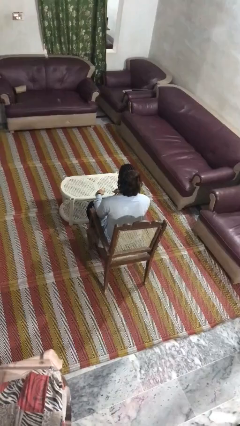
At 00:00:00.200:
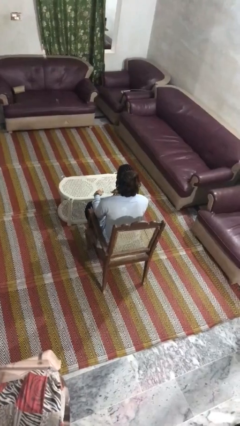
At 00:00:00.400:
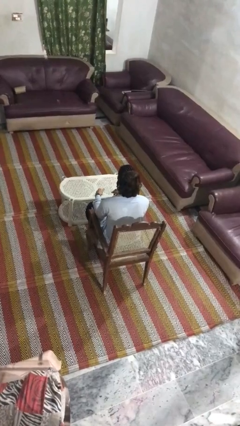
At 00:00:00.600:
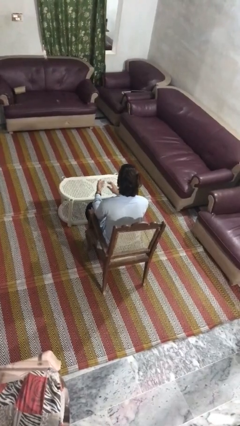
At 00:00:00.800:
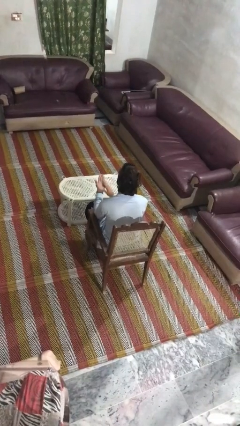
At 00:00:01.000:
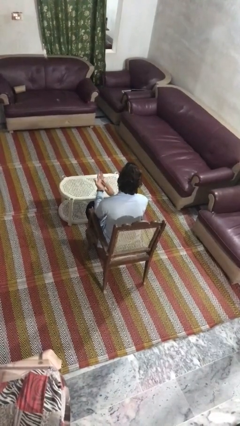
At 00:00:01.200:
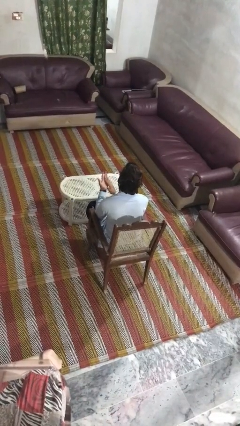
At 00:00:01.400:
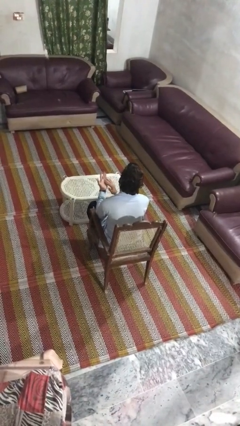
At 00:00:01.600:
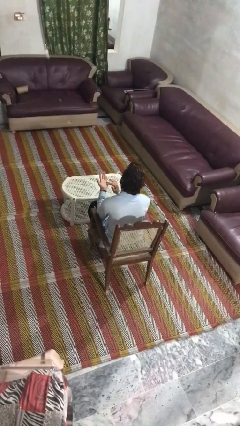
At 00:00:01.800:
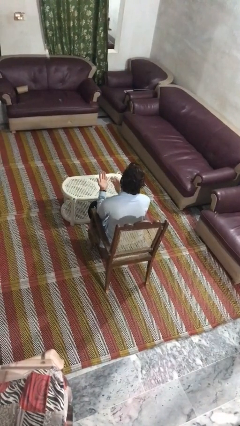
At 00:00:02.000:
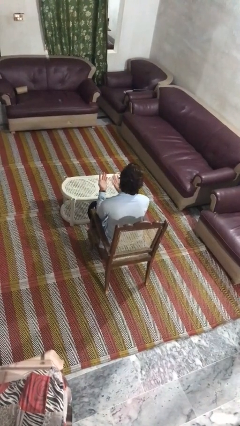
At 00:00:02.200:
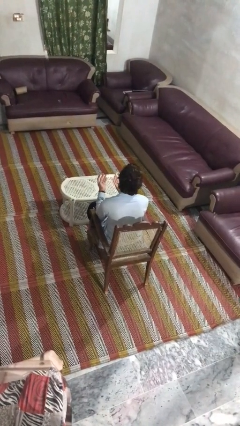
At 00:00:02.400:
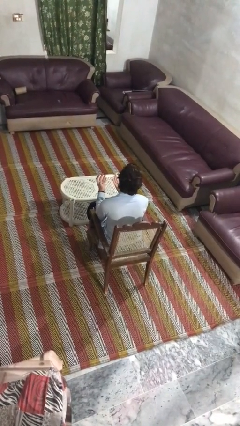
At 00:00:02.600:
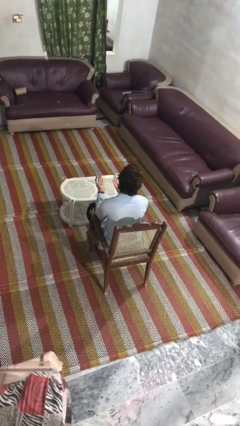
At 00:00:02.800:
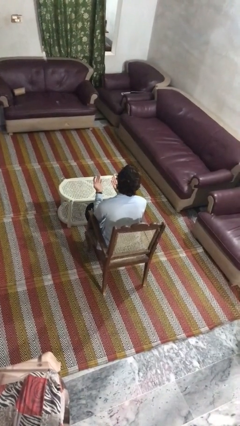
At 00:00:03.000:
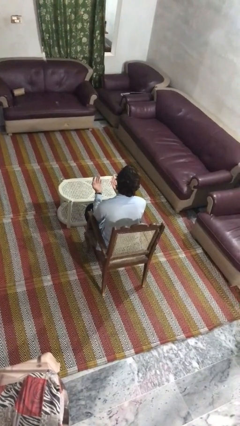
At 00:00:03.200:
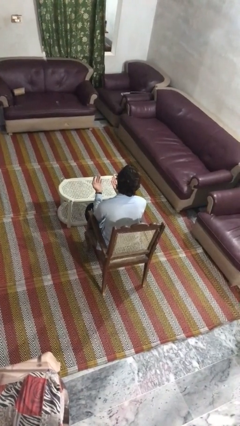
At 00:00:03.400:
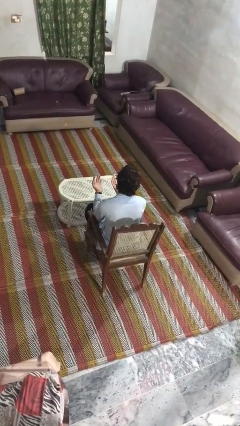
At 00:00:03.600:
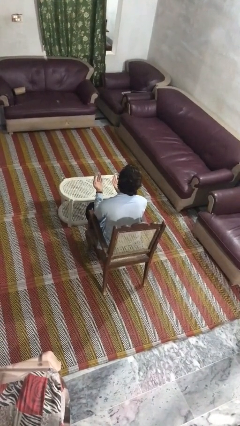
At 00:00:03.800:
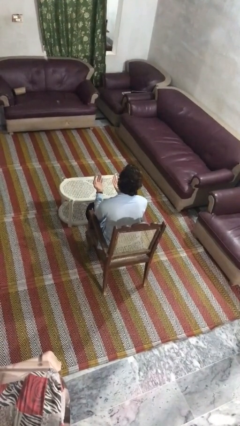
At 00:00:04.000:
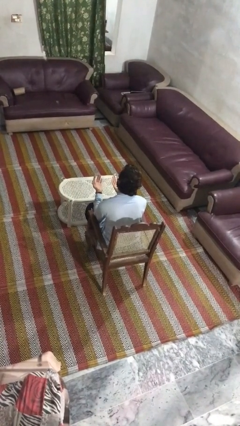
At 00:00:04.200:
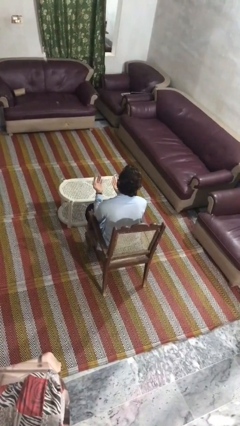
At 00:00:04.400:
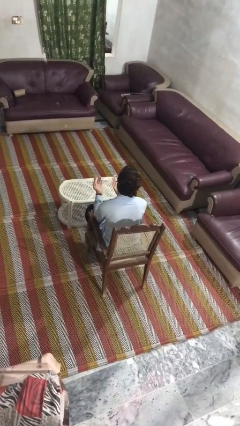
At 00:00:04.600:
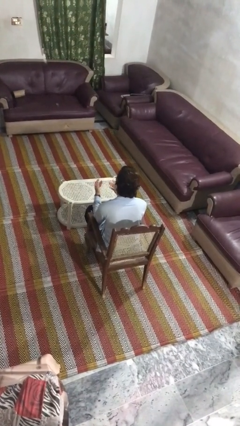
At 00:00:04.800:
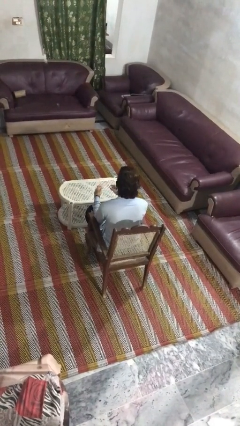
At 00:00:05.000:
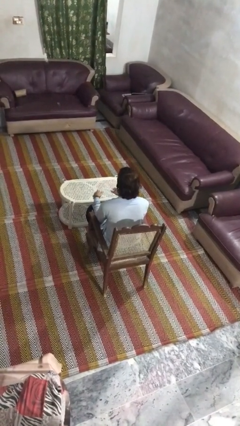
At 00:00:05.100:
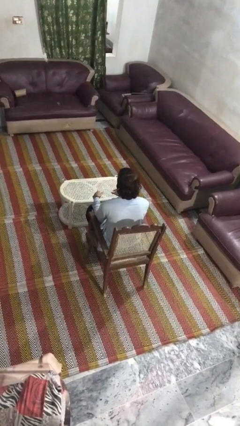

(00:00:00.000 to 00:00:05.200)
person looks at hands in lap

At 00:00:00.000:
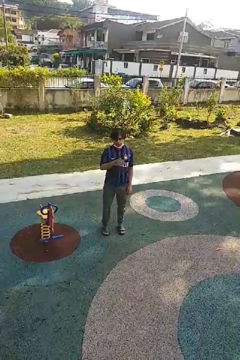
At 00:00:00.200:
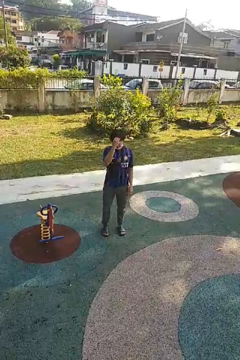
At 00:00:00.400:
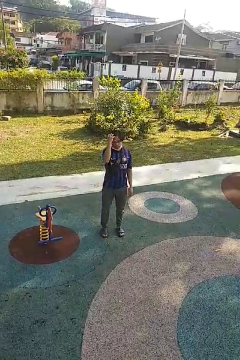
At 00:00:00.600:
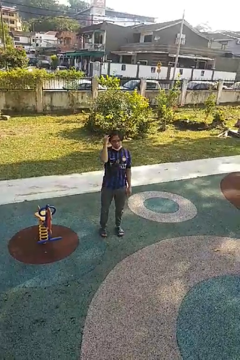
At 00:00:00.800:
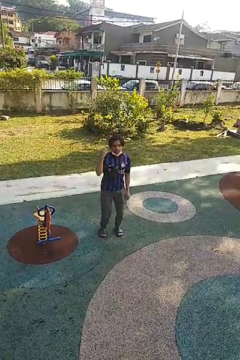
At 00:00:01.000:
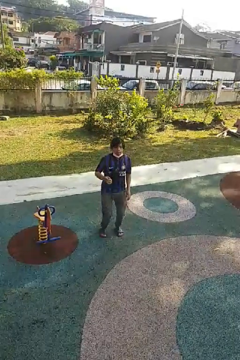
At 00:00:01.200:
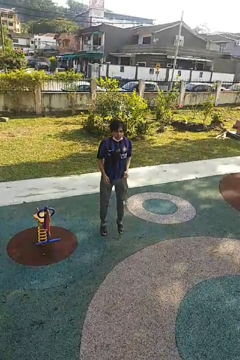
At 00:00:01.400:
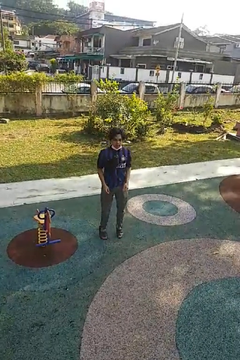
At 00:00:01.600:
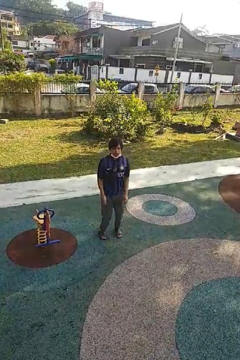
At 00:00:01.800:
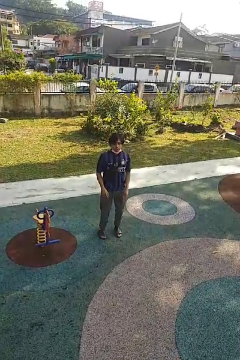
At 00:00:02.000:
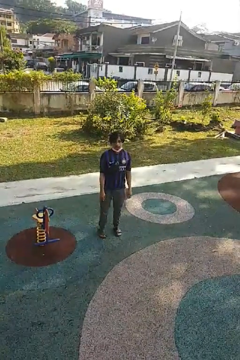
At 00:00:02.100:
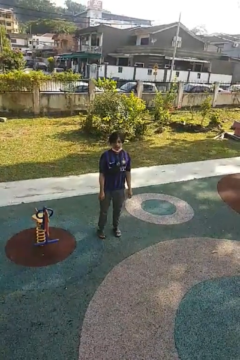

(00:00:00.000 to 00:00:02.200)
person jumps

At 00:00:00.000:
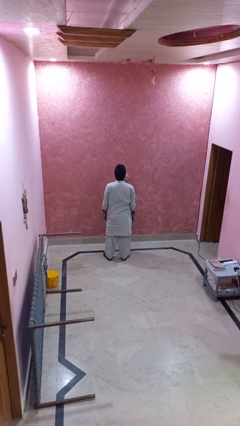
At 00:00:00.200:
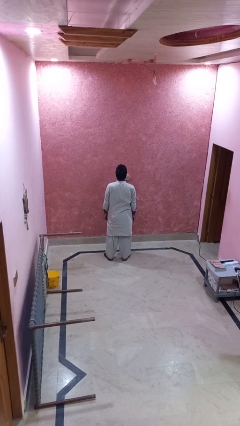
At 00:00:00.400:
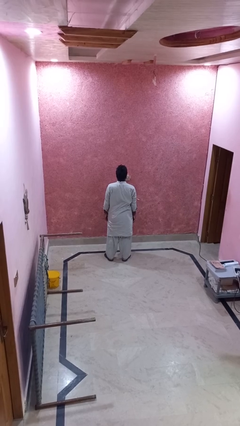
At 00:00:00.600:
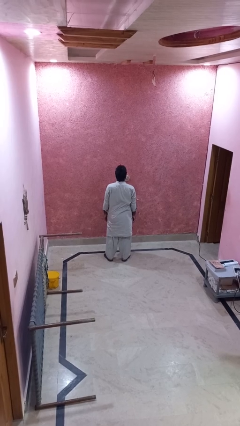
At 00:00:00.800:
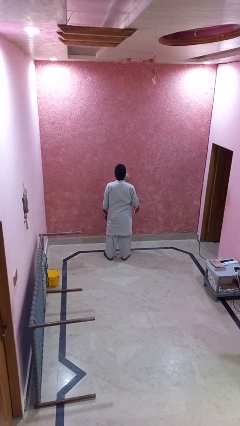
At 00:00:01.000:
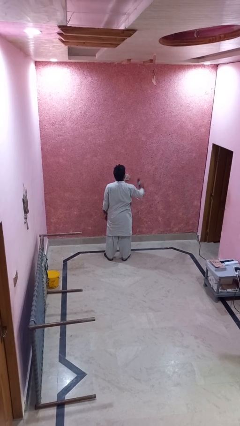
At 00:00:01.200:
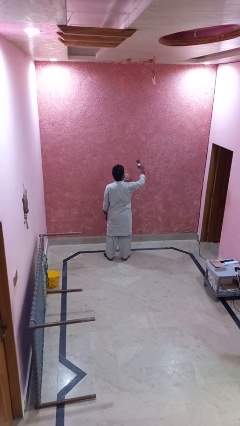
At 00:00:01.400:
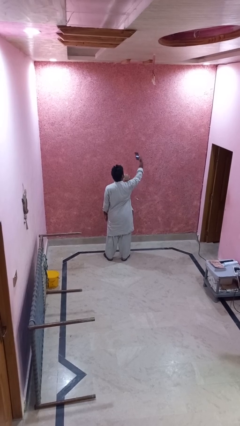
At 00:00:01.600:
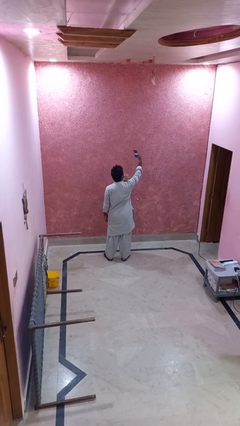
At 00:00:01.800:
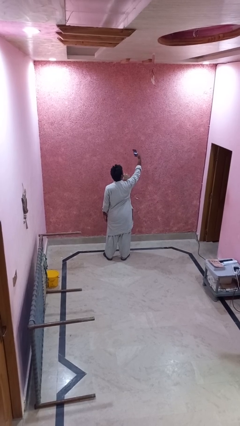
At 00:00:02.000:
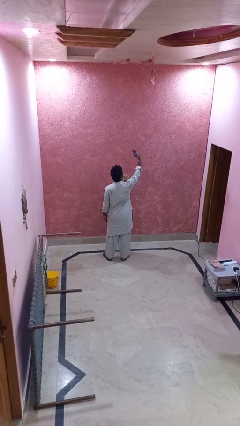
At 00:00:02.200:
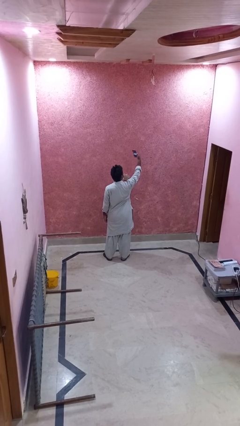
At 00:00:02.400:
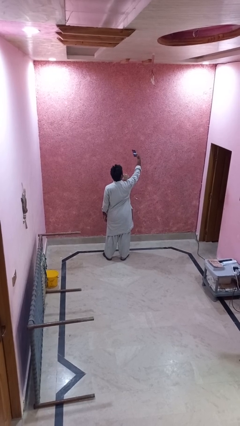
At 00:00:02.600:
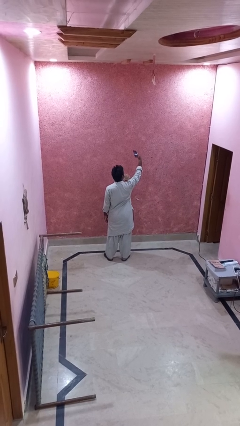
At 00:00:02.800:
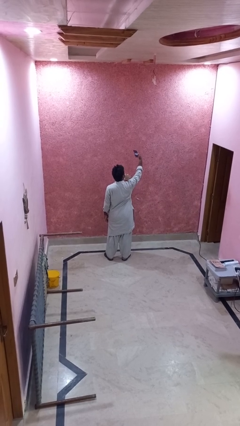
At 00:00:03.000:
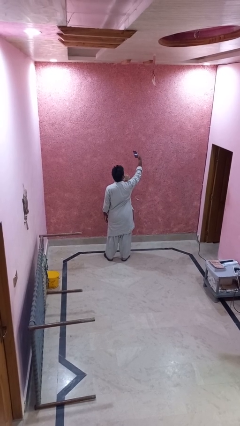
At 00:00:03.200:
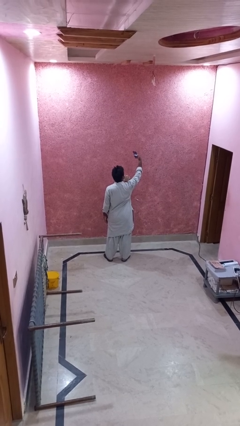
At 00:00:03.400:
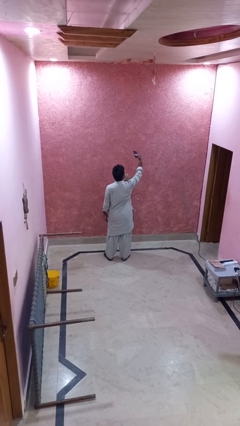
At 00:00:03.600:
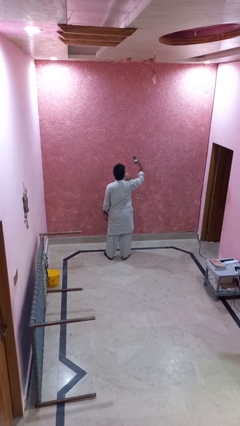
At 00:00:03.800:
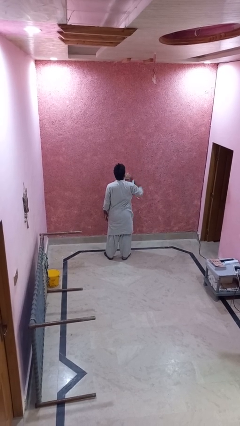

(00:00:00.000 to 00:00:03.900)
person takes selfie

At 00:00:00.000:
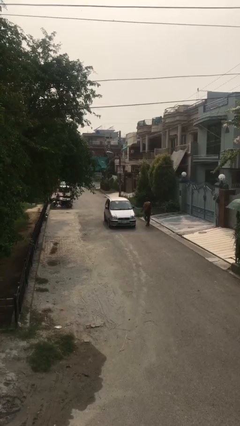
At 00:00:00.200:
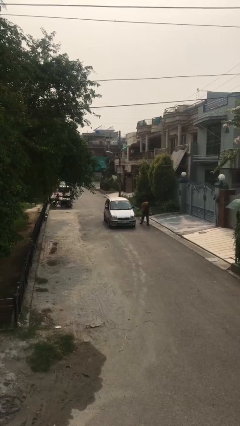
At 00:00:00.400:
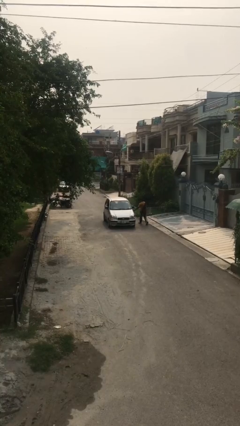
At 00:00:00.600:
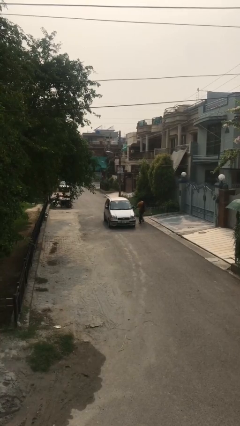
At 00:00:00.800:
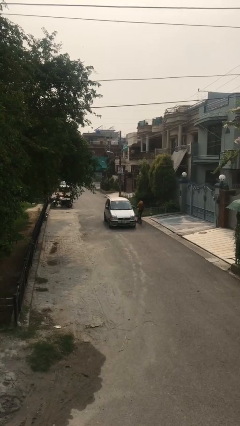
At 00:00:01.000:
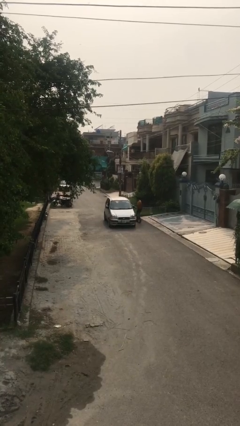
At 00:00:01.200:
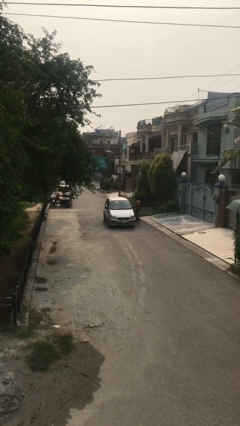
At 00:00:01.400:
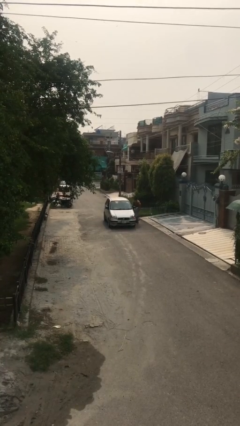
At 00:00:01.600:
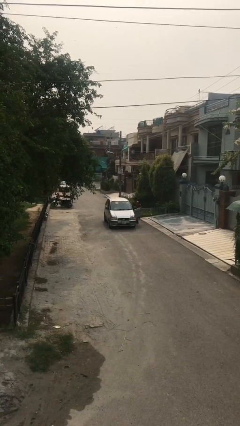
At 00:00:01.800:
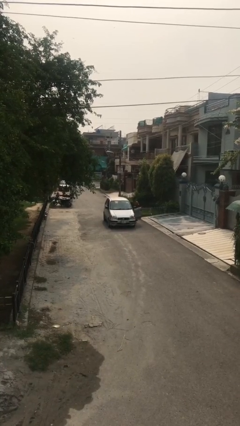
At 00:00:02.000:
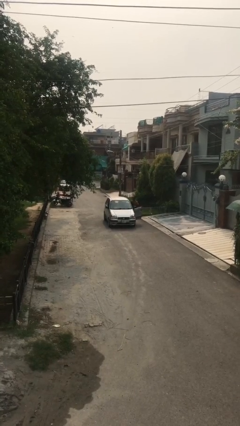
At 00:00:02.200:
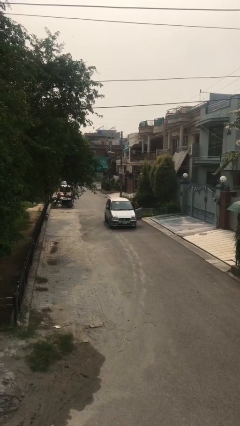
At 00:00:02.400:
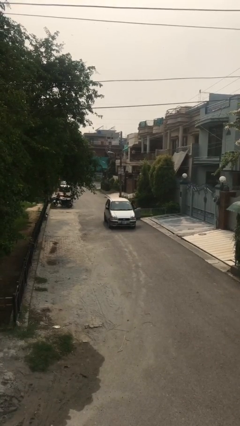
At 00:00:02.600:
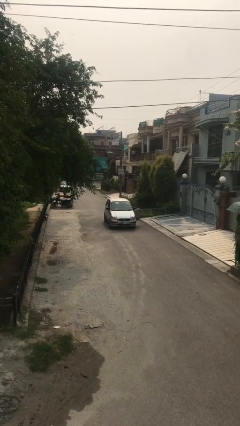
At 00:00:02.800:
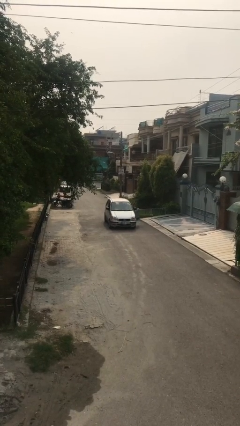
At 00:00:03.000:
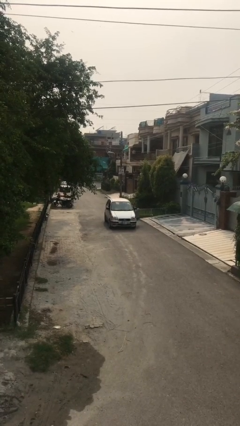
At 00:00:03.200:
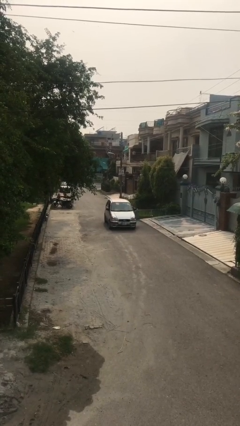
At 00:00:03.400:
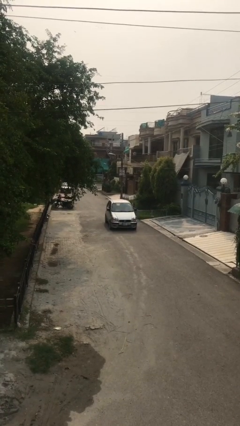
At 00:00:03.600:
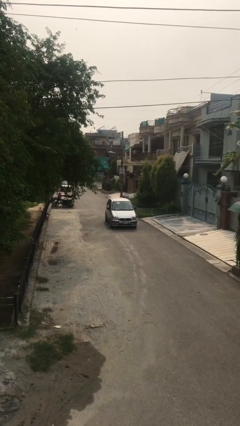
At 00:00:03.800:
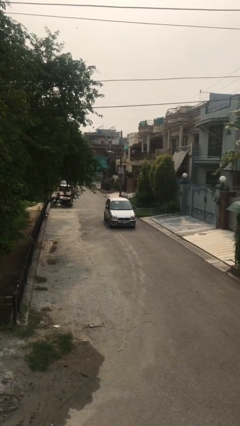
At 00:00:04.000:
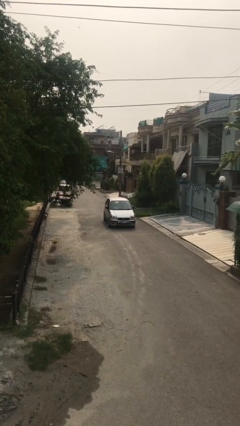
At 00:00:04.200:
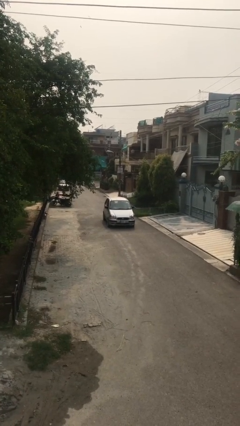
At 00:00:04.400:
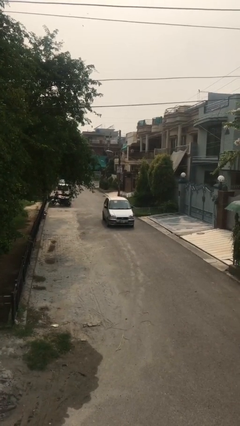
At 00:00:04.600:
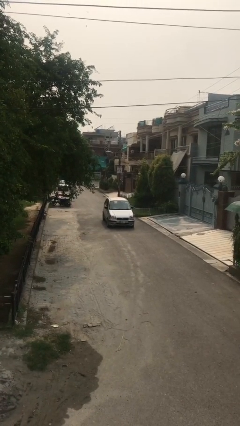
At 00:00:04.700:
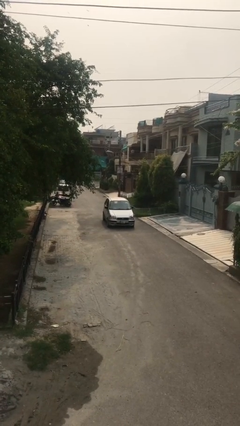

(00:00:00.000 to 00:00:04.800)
car picks up person

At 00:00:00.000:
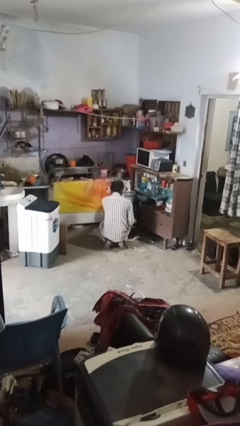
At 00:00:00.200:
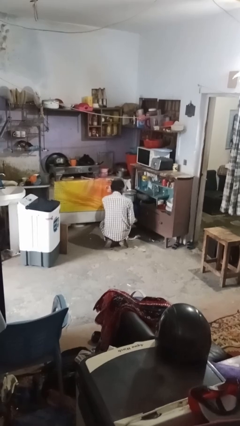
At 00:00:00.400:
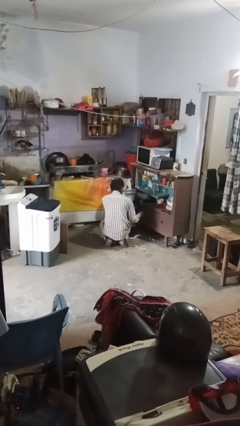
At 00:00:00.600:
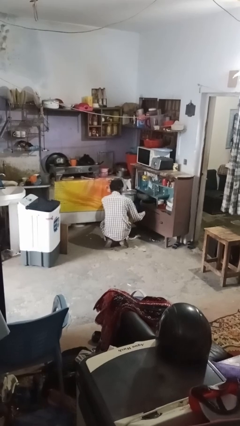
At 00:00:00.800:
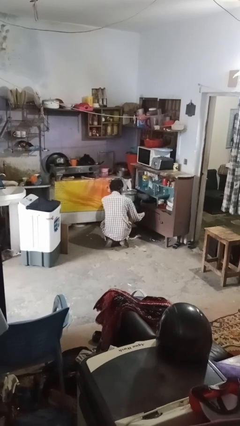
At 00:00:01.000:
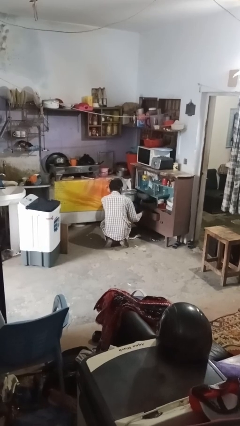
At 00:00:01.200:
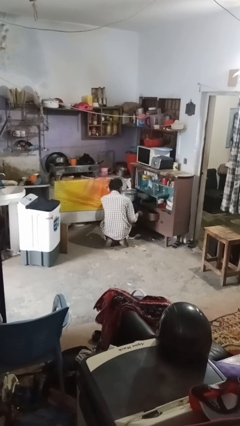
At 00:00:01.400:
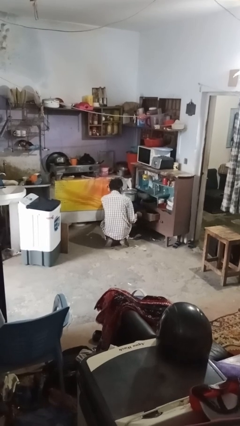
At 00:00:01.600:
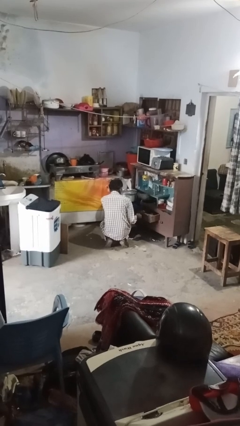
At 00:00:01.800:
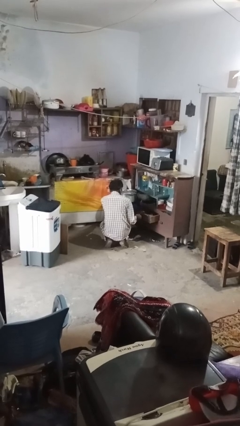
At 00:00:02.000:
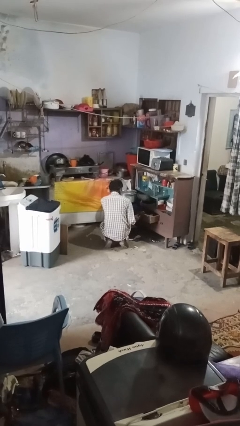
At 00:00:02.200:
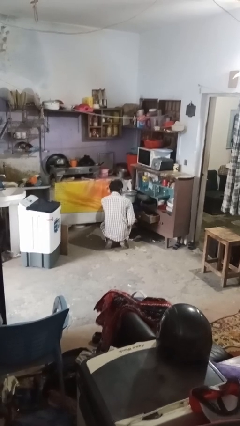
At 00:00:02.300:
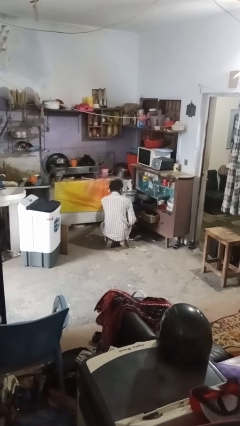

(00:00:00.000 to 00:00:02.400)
person opens kitchen drawer
